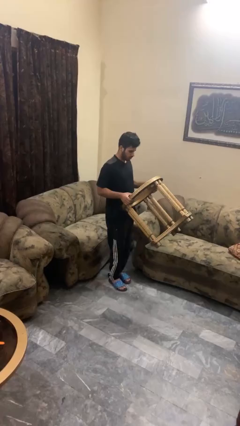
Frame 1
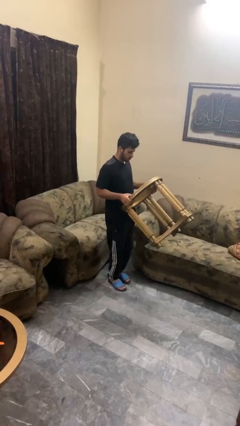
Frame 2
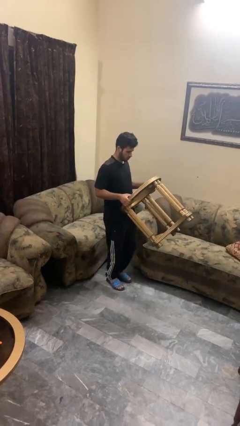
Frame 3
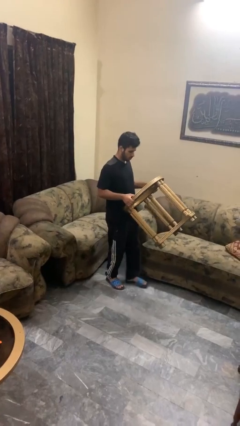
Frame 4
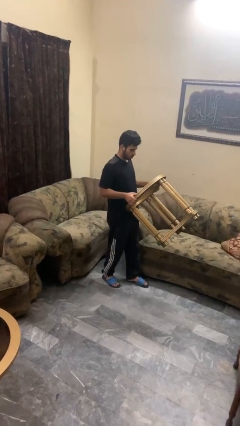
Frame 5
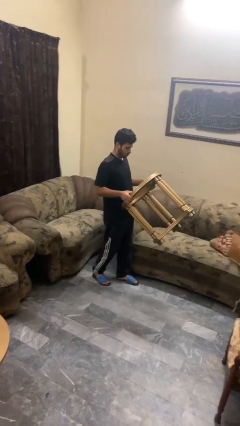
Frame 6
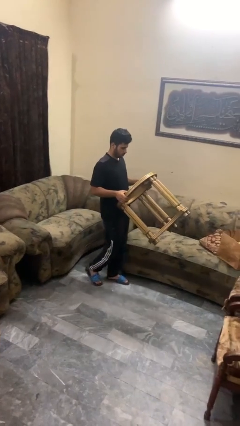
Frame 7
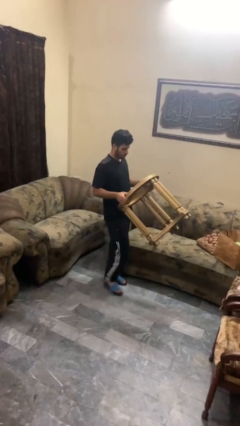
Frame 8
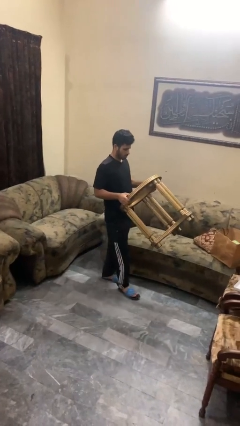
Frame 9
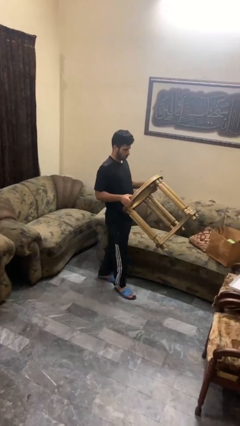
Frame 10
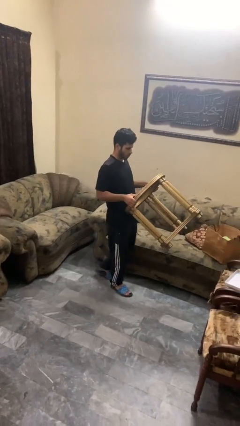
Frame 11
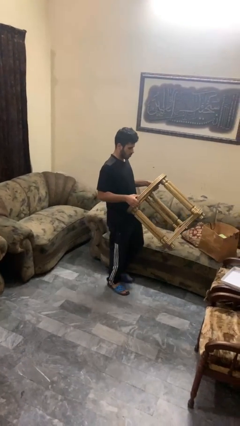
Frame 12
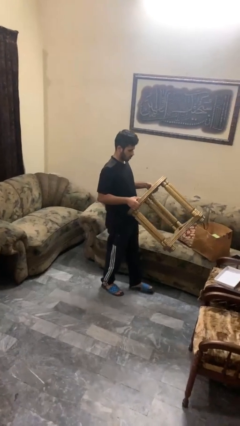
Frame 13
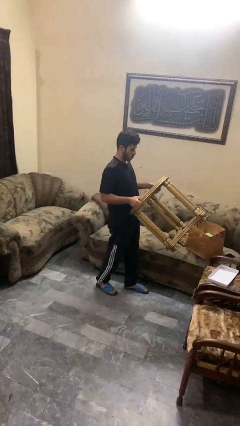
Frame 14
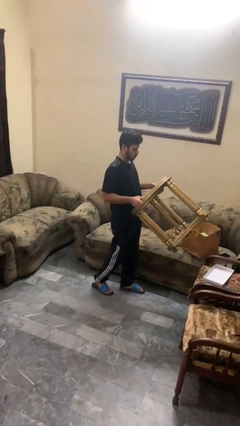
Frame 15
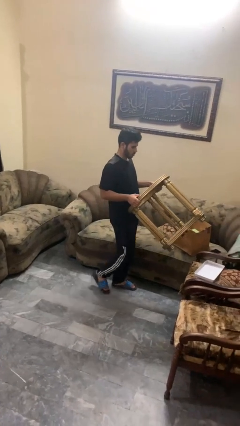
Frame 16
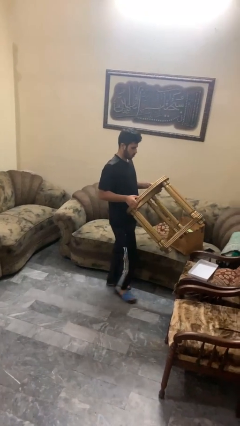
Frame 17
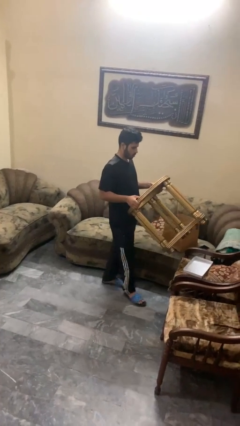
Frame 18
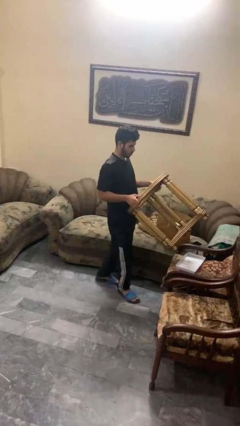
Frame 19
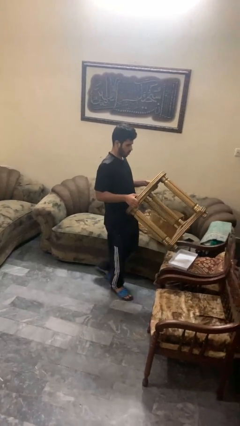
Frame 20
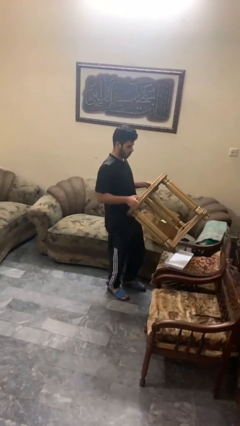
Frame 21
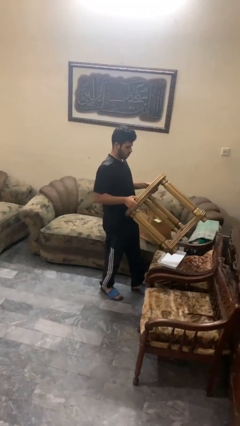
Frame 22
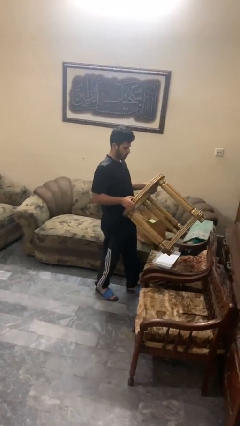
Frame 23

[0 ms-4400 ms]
person carries furniture

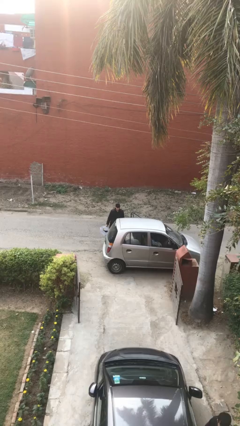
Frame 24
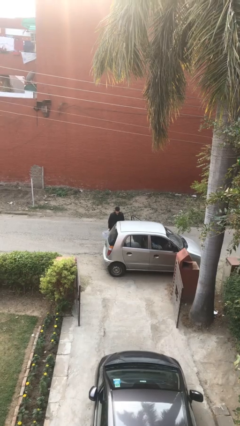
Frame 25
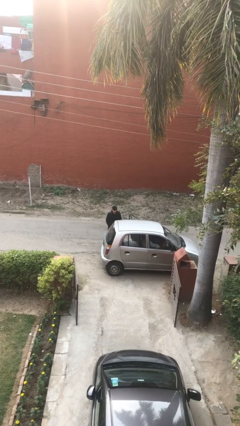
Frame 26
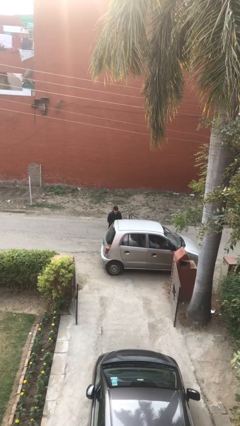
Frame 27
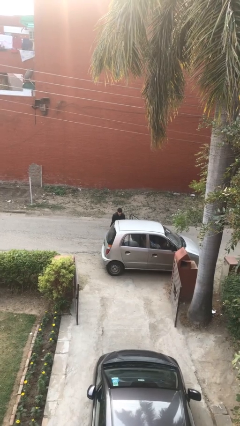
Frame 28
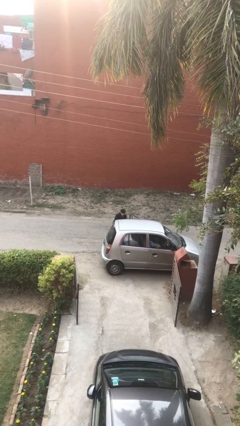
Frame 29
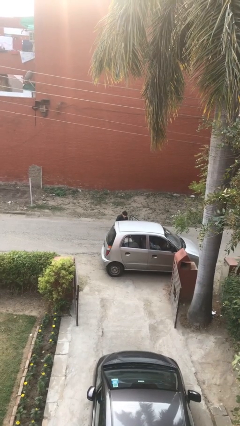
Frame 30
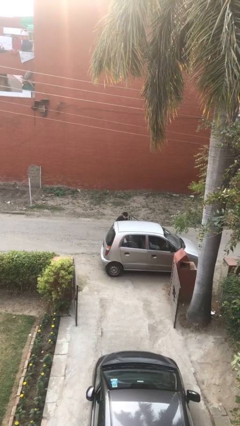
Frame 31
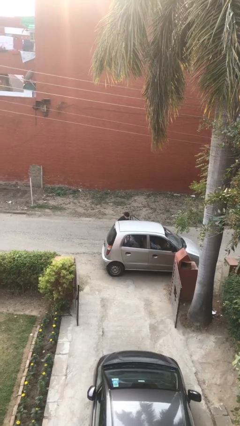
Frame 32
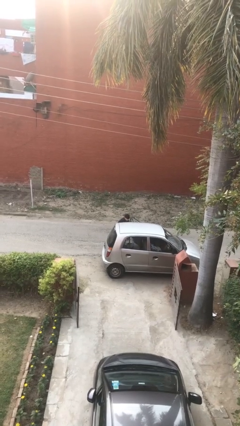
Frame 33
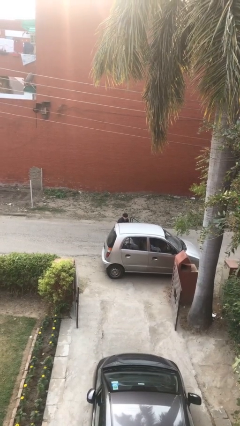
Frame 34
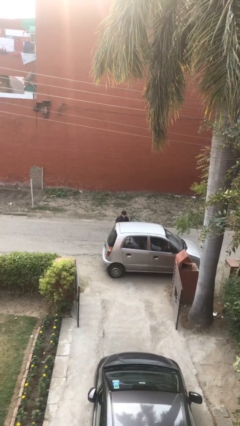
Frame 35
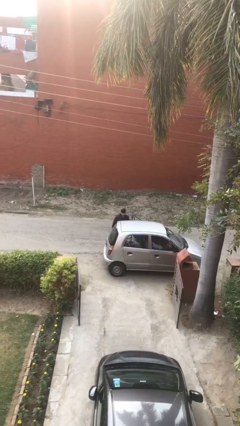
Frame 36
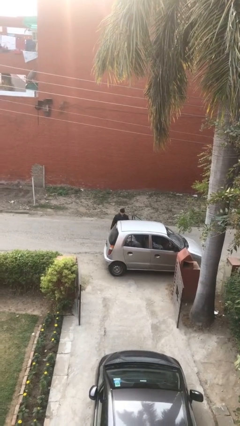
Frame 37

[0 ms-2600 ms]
person loads car

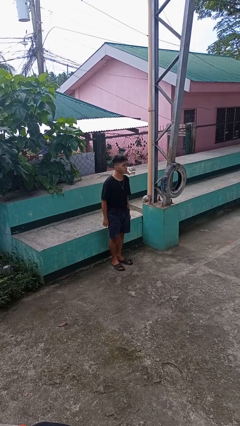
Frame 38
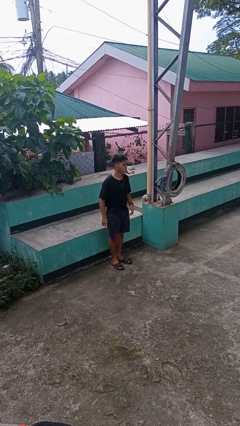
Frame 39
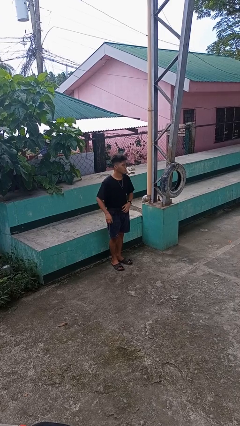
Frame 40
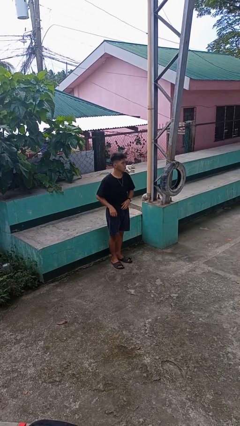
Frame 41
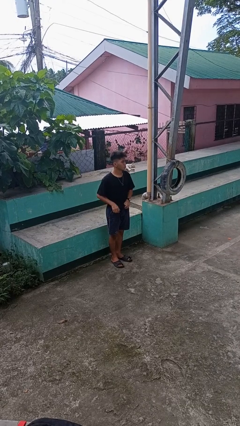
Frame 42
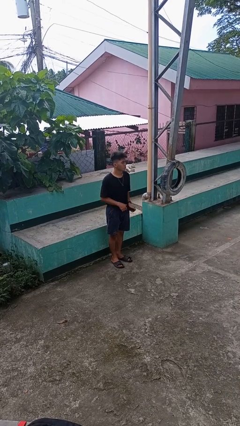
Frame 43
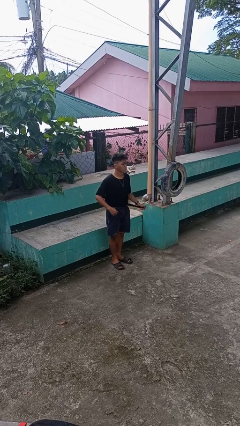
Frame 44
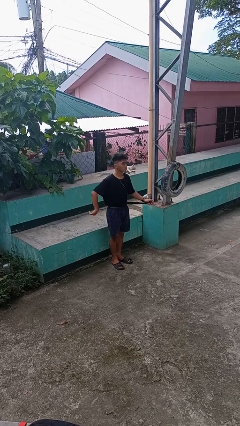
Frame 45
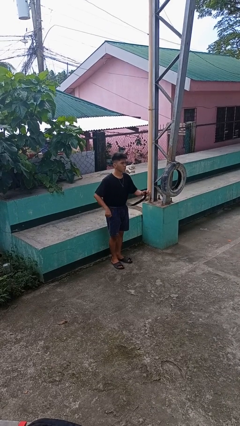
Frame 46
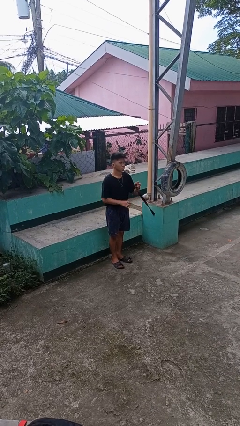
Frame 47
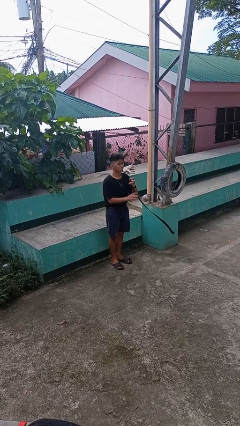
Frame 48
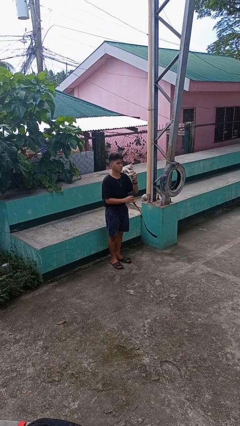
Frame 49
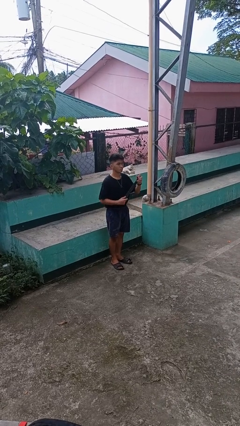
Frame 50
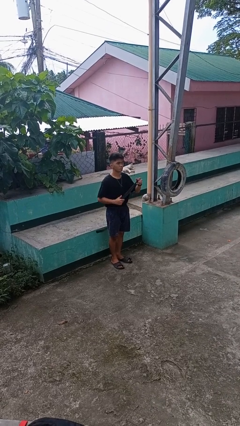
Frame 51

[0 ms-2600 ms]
person takes off belt

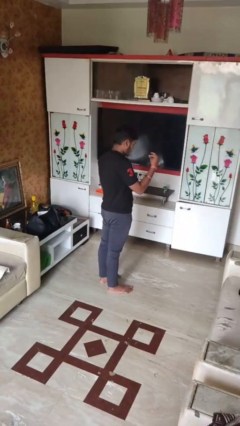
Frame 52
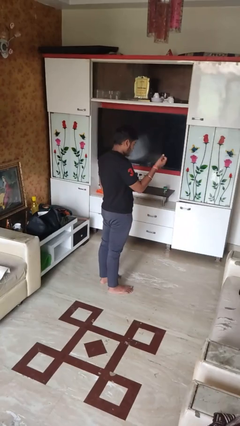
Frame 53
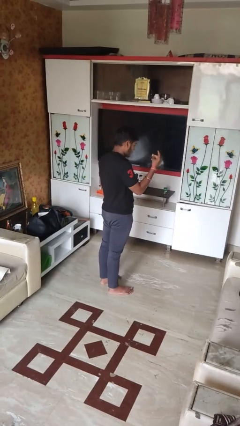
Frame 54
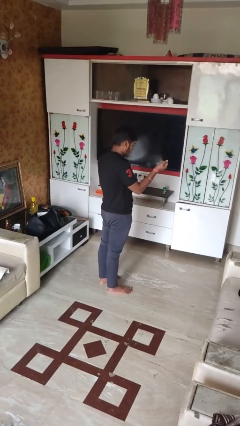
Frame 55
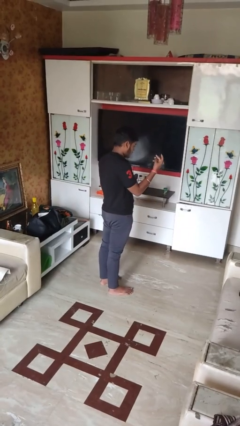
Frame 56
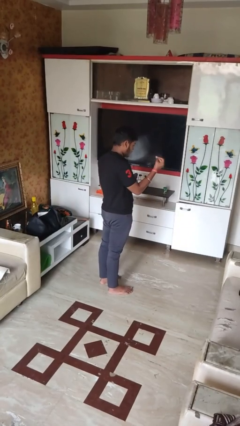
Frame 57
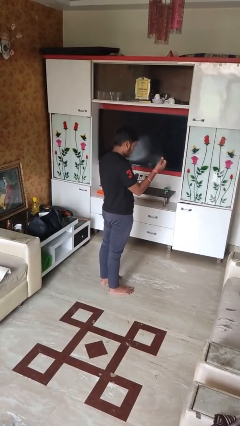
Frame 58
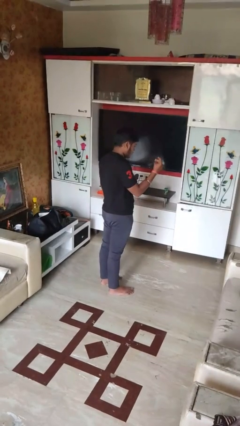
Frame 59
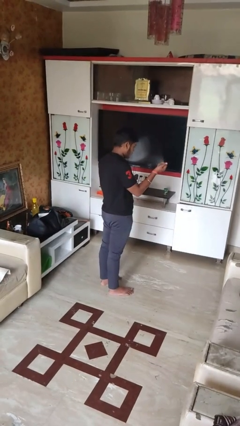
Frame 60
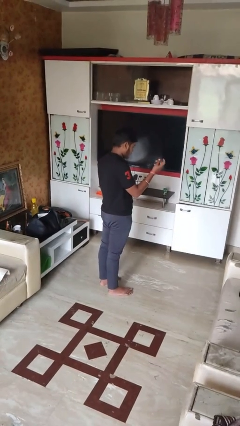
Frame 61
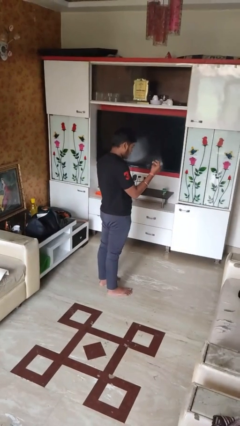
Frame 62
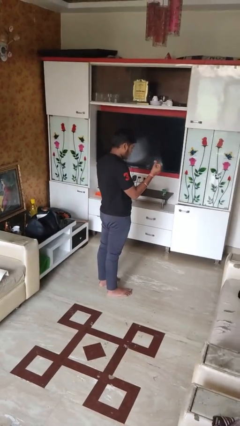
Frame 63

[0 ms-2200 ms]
person snaps fingers

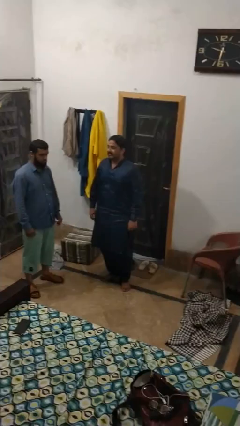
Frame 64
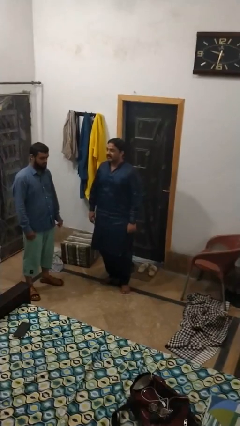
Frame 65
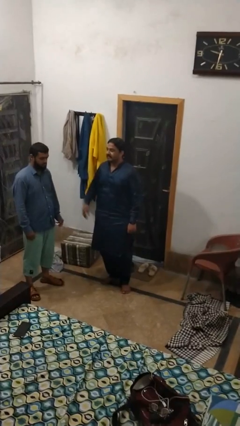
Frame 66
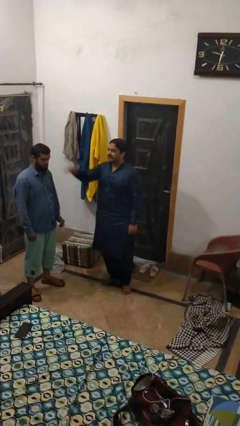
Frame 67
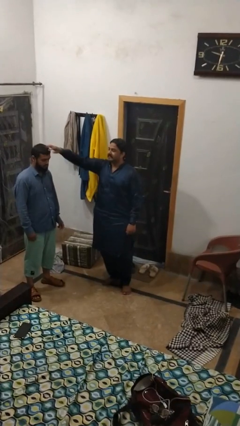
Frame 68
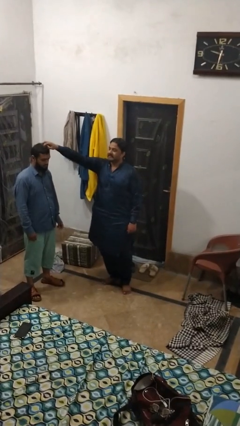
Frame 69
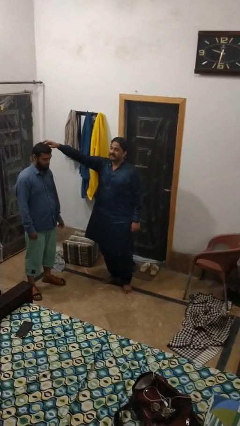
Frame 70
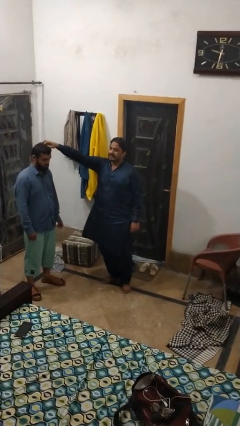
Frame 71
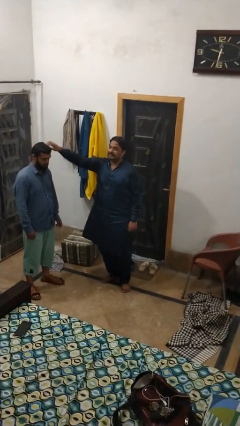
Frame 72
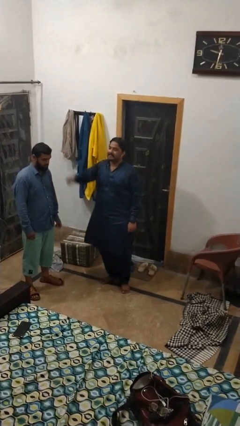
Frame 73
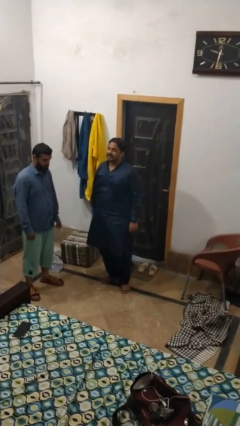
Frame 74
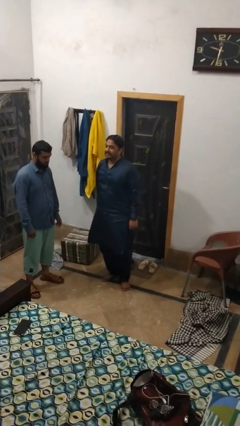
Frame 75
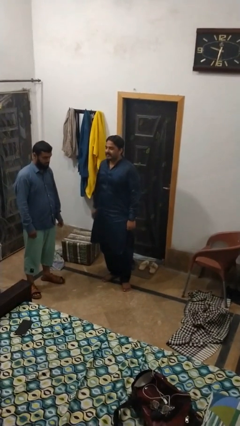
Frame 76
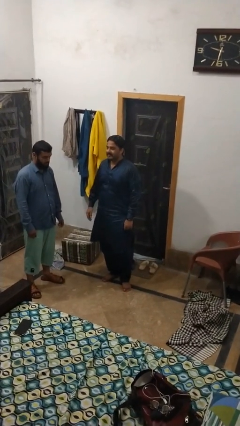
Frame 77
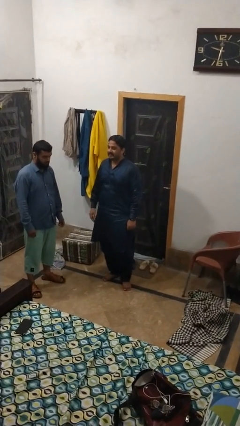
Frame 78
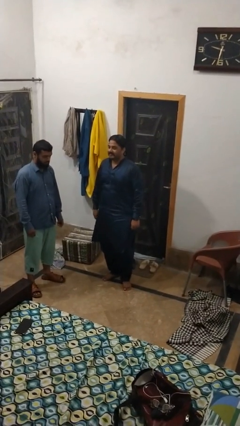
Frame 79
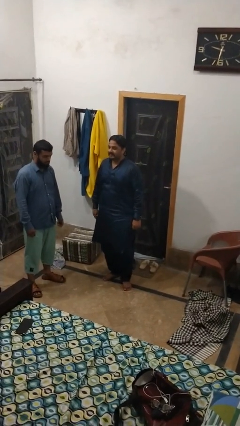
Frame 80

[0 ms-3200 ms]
person grabs person by hair

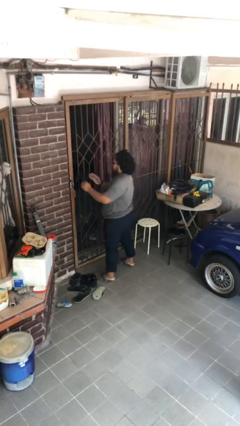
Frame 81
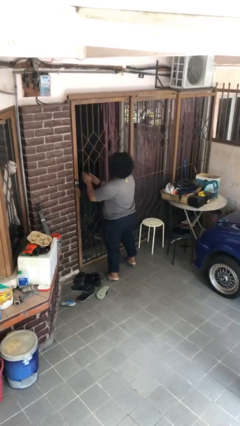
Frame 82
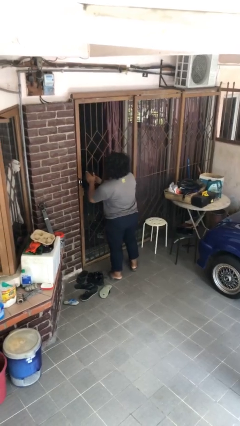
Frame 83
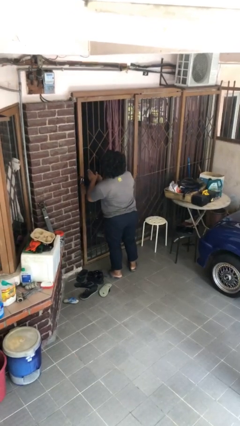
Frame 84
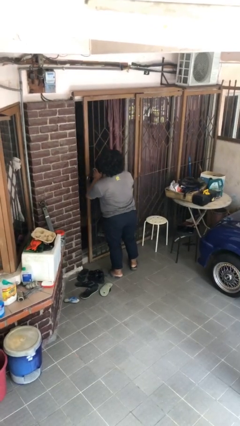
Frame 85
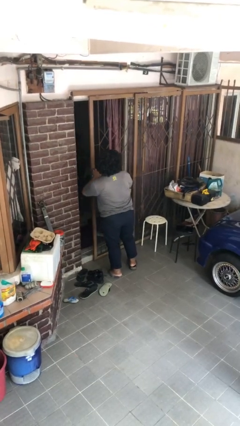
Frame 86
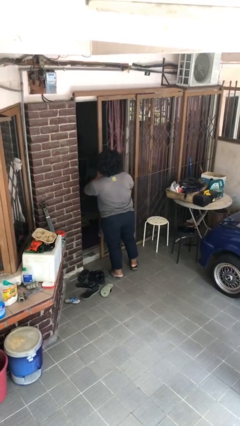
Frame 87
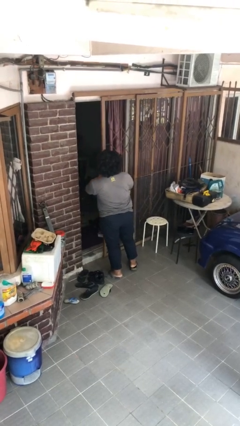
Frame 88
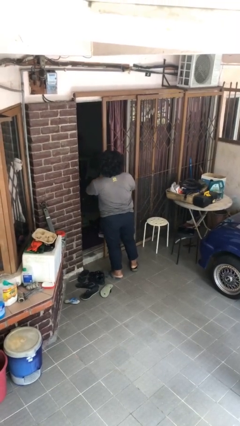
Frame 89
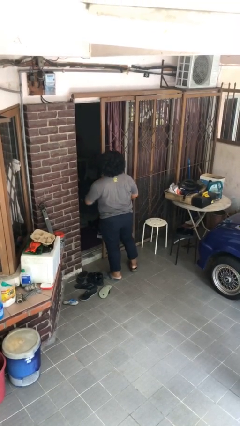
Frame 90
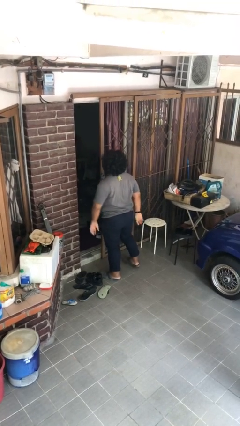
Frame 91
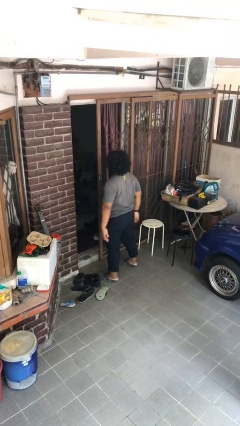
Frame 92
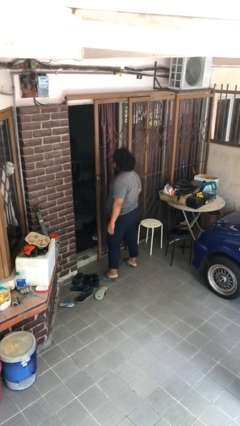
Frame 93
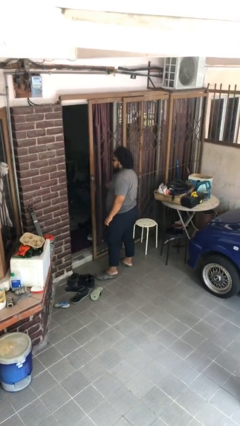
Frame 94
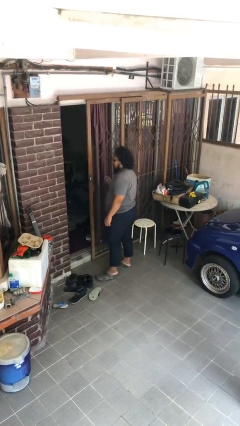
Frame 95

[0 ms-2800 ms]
person opens facility door
